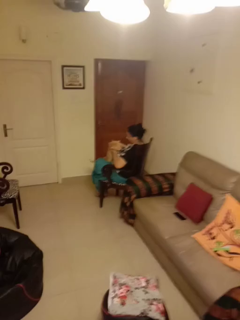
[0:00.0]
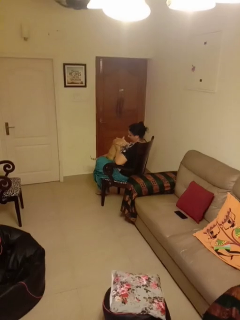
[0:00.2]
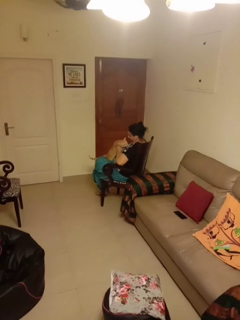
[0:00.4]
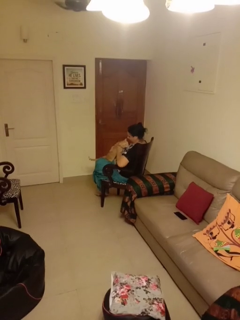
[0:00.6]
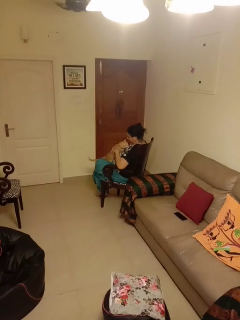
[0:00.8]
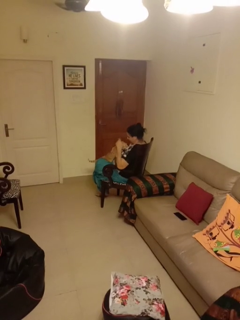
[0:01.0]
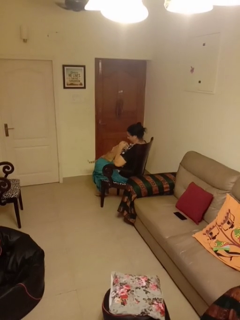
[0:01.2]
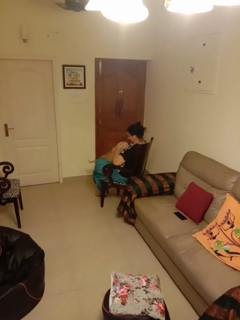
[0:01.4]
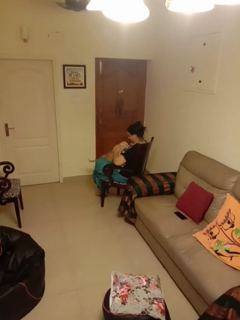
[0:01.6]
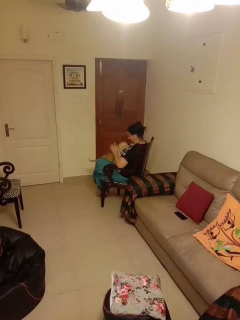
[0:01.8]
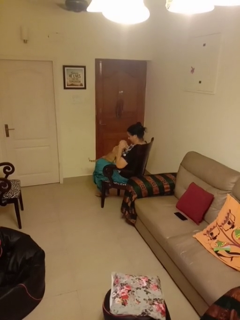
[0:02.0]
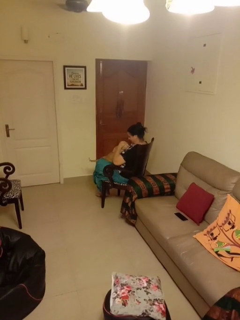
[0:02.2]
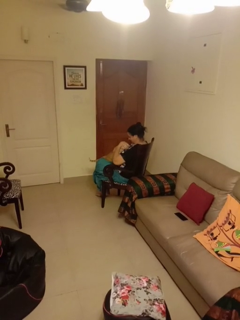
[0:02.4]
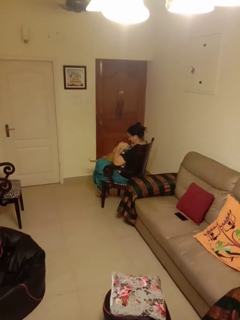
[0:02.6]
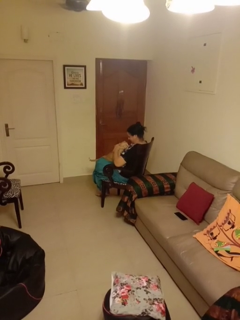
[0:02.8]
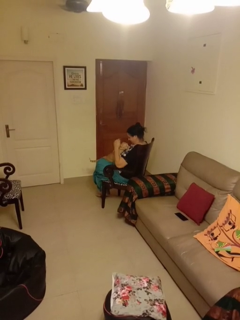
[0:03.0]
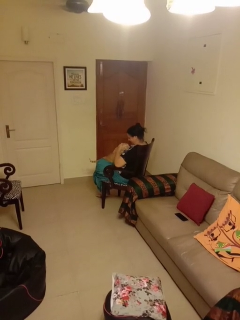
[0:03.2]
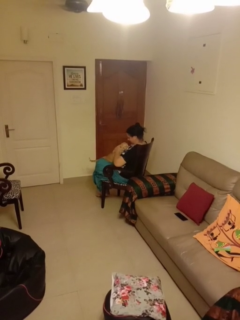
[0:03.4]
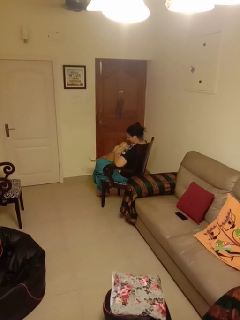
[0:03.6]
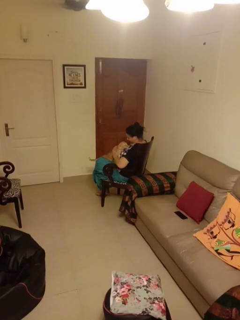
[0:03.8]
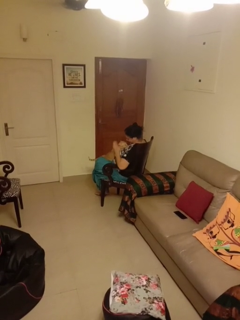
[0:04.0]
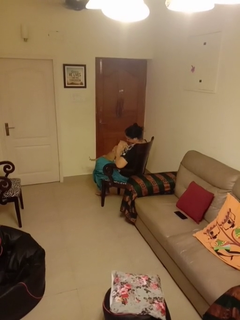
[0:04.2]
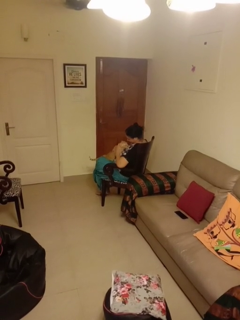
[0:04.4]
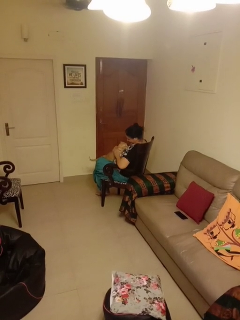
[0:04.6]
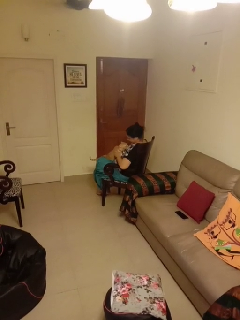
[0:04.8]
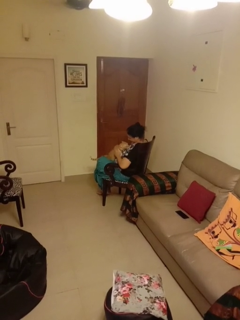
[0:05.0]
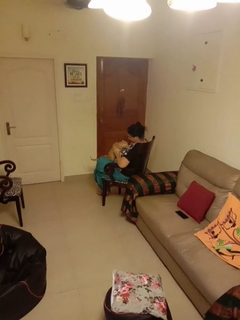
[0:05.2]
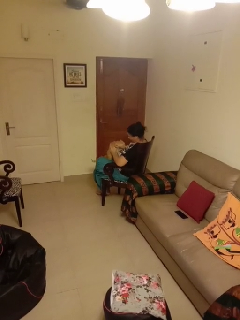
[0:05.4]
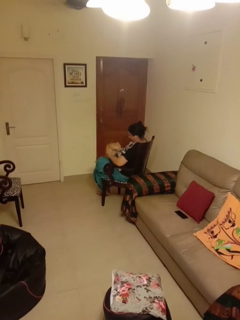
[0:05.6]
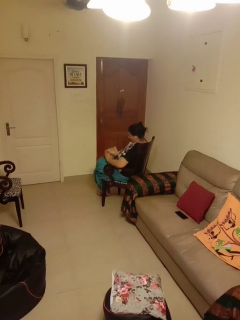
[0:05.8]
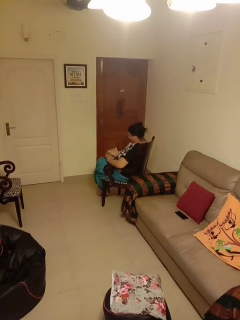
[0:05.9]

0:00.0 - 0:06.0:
person hugs cat

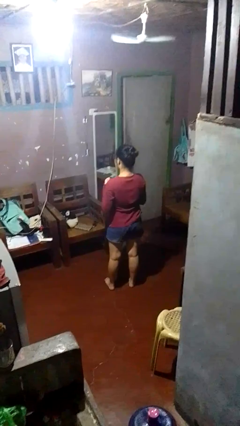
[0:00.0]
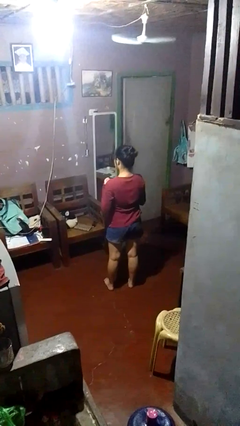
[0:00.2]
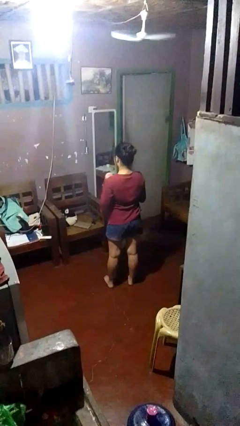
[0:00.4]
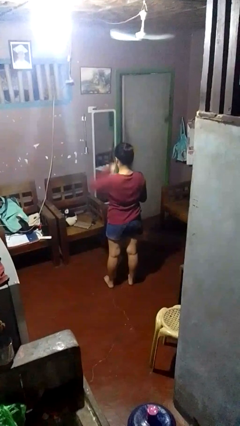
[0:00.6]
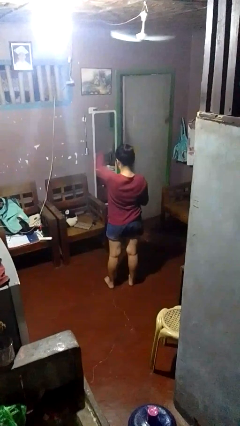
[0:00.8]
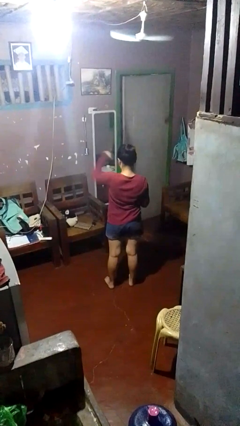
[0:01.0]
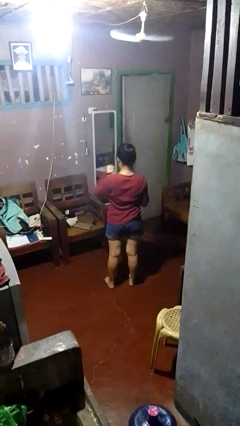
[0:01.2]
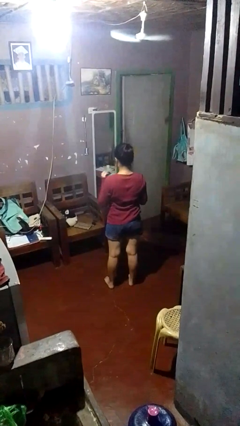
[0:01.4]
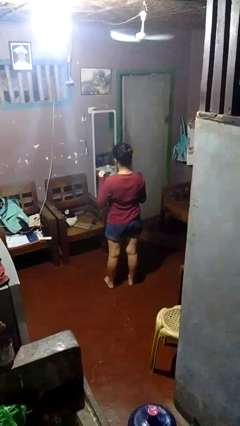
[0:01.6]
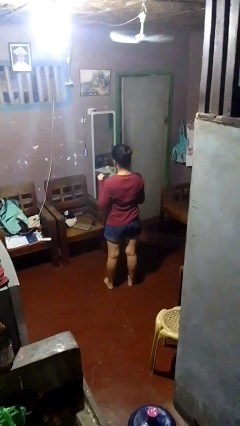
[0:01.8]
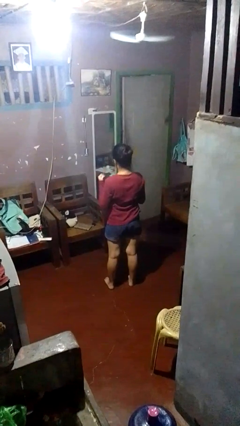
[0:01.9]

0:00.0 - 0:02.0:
person punches

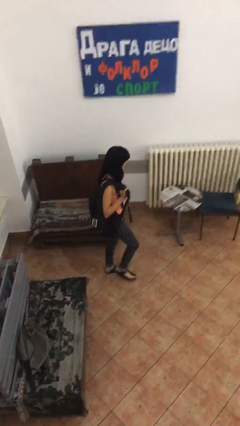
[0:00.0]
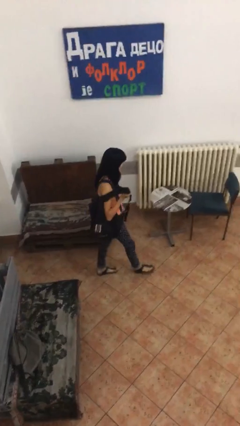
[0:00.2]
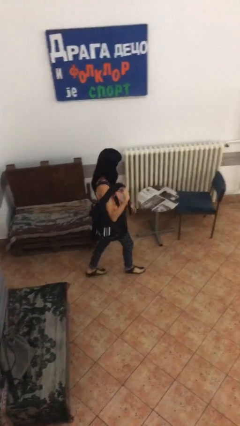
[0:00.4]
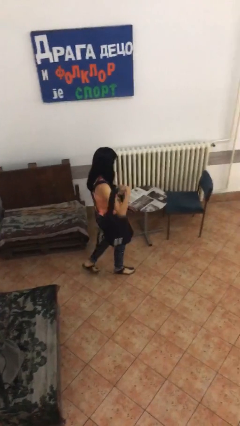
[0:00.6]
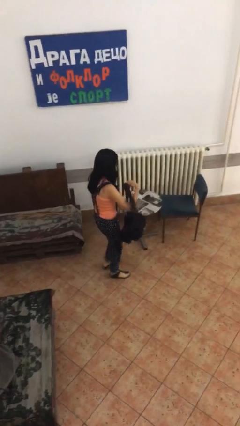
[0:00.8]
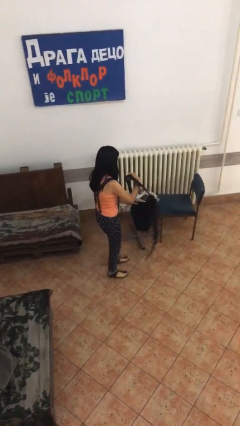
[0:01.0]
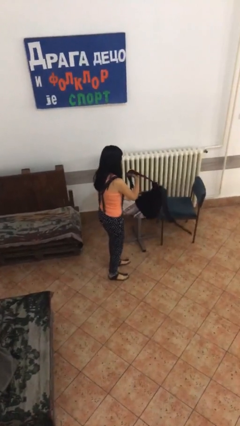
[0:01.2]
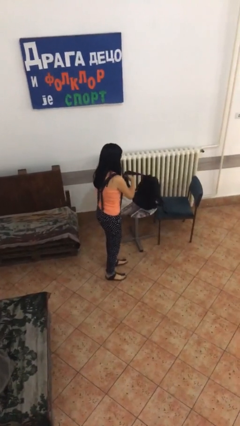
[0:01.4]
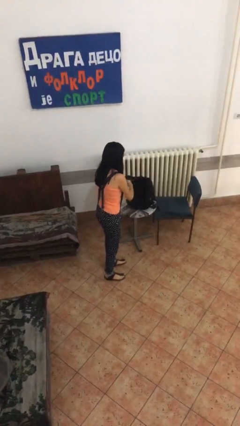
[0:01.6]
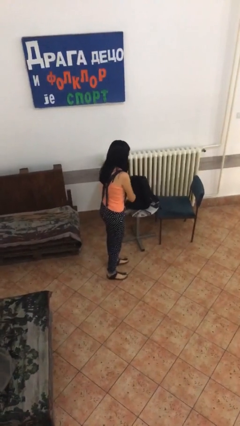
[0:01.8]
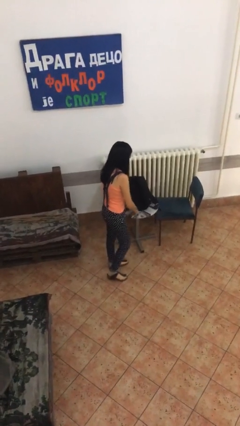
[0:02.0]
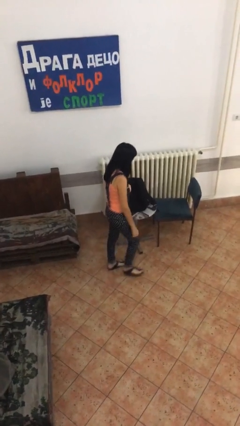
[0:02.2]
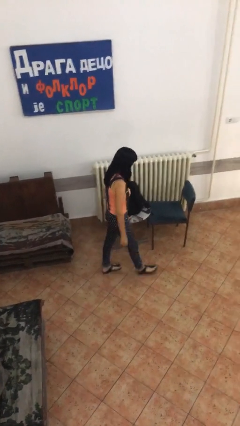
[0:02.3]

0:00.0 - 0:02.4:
person puts down object on table

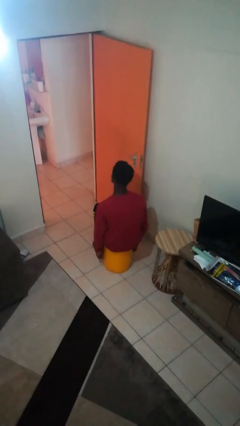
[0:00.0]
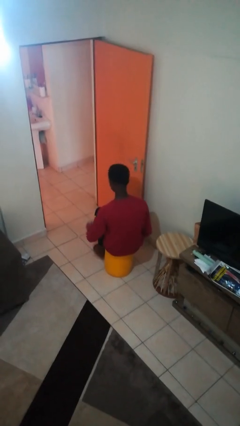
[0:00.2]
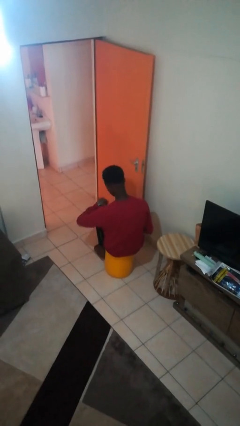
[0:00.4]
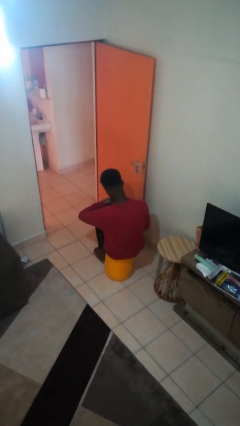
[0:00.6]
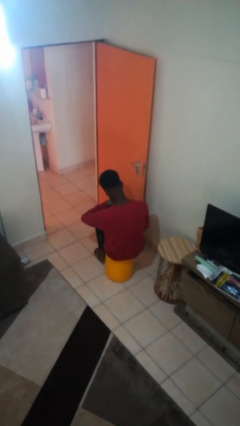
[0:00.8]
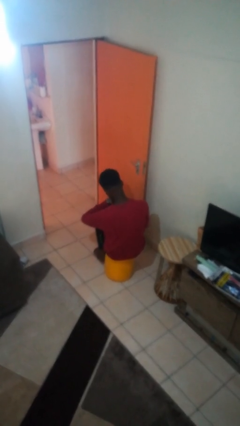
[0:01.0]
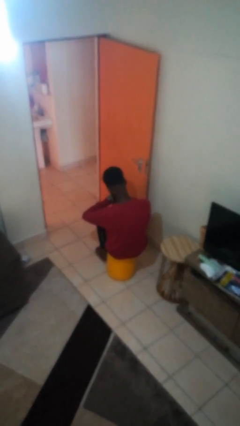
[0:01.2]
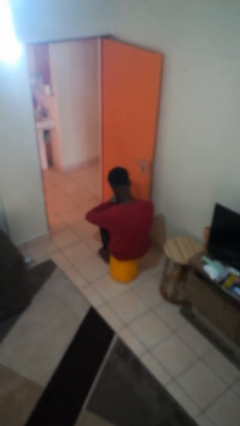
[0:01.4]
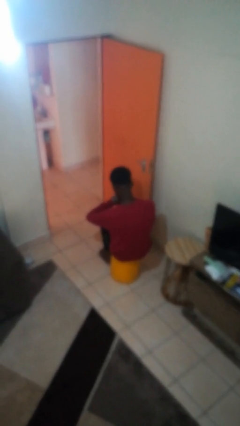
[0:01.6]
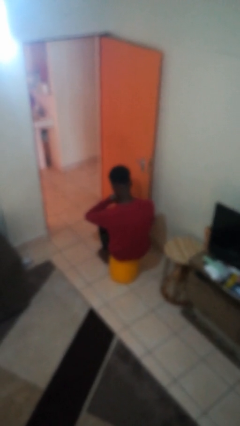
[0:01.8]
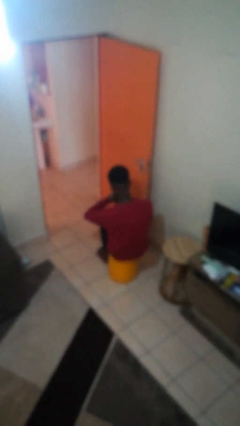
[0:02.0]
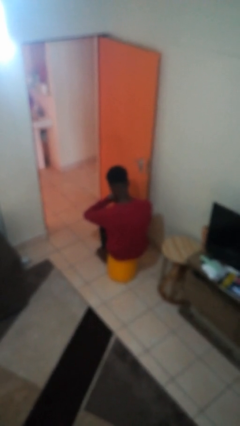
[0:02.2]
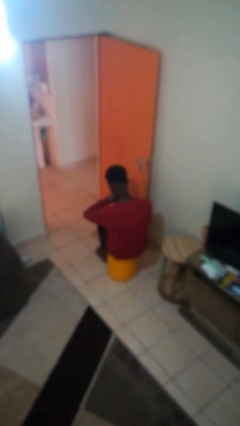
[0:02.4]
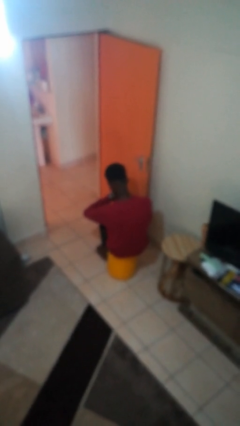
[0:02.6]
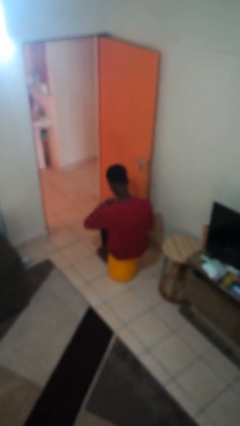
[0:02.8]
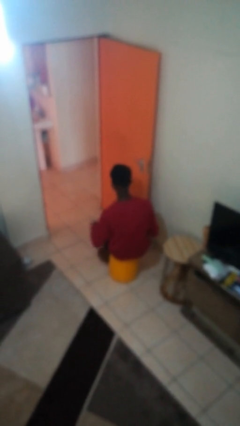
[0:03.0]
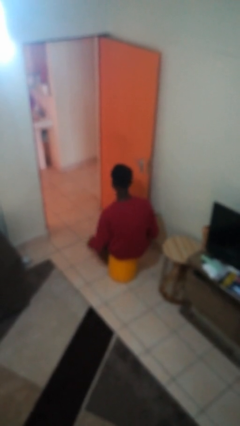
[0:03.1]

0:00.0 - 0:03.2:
person looks at wristwatch

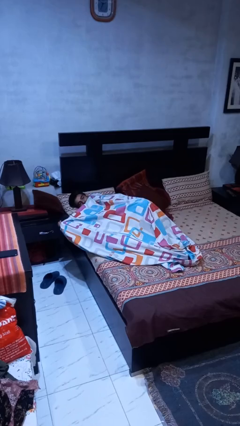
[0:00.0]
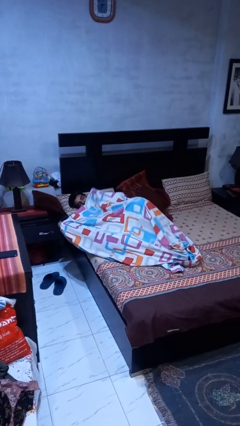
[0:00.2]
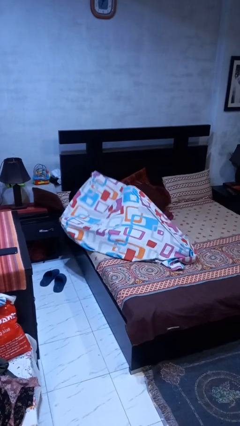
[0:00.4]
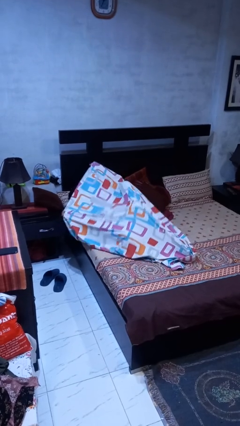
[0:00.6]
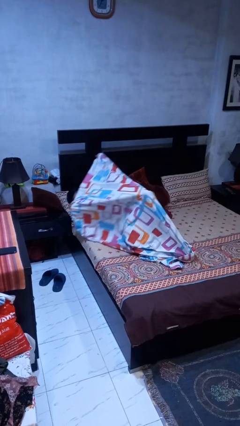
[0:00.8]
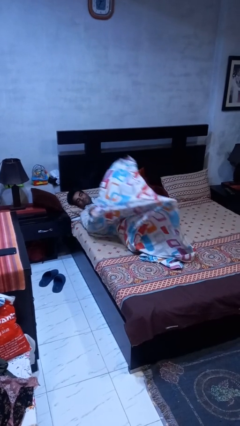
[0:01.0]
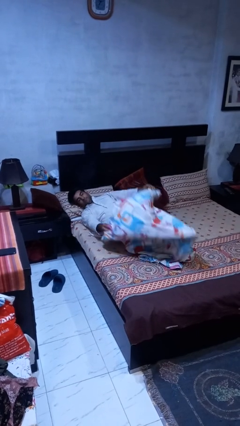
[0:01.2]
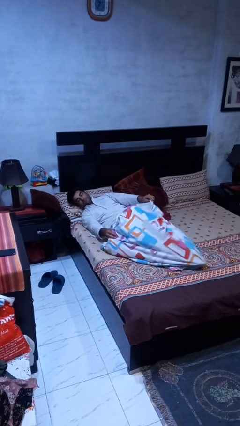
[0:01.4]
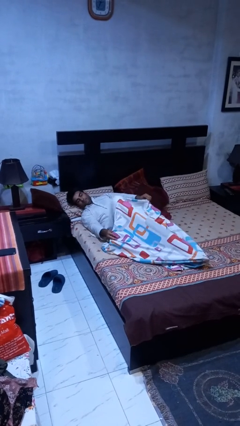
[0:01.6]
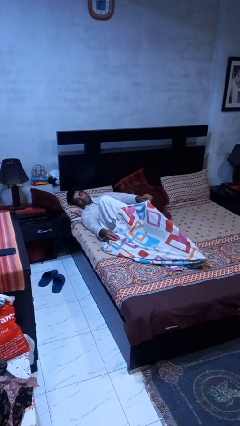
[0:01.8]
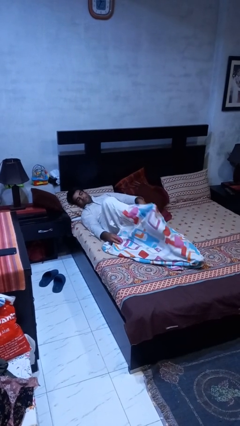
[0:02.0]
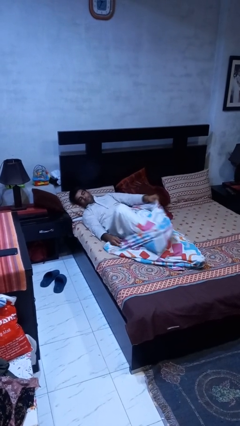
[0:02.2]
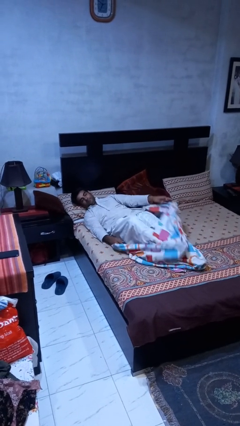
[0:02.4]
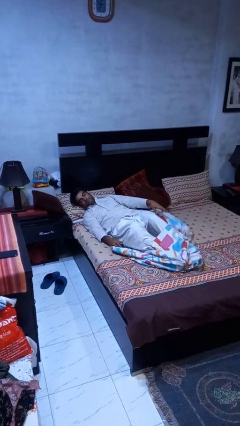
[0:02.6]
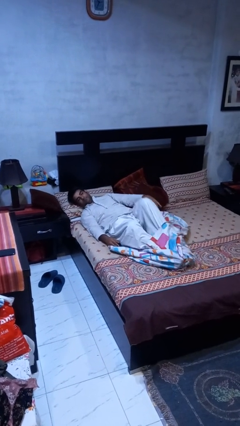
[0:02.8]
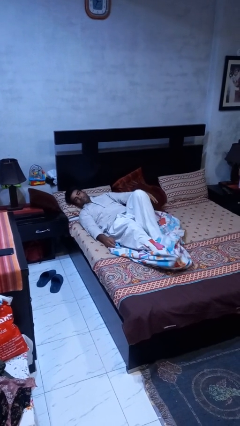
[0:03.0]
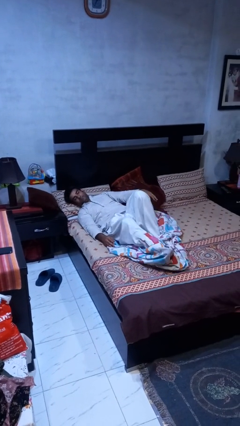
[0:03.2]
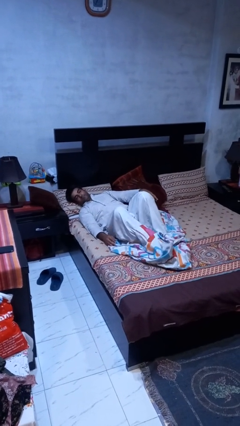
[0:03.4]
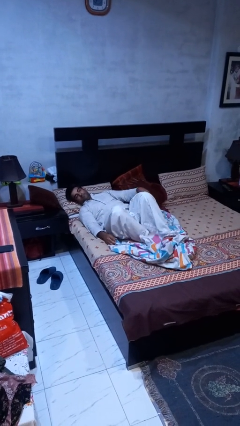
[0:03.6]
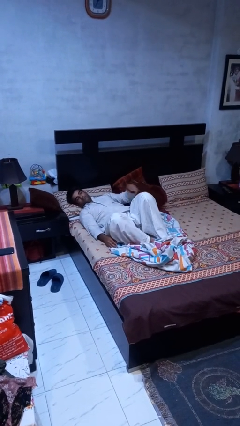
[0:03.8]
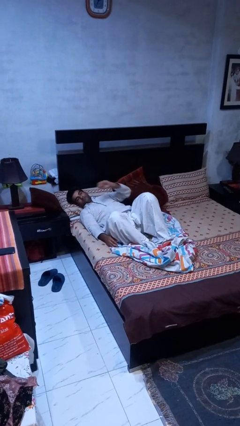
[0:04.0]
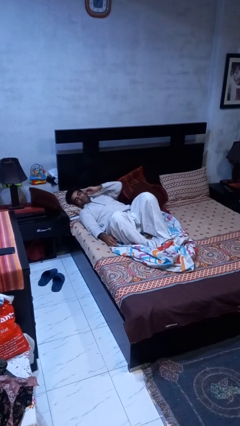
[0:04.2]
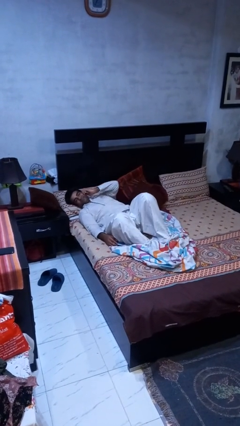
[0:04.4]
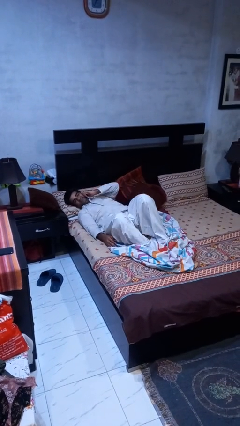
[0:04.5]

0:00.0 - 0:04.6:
person uncovers with bedsheets

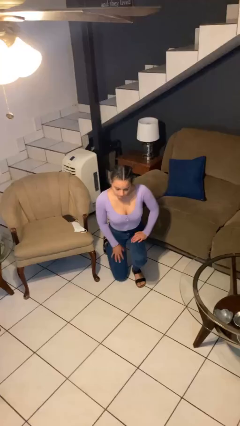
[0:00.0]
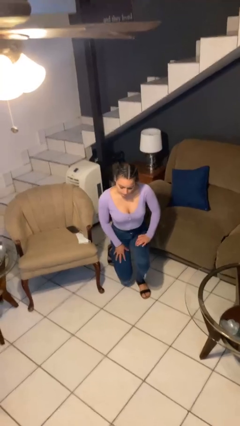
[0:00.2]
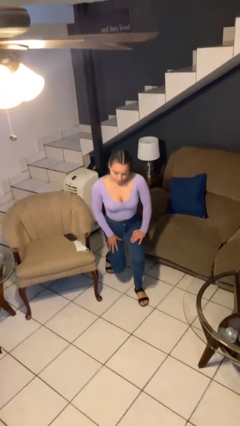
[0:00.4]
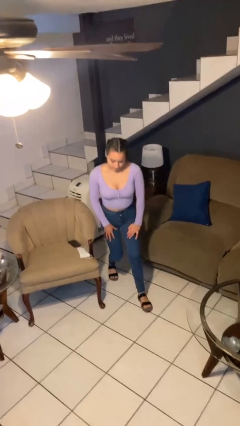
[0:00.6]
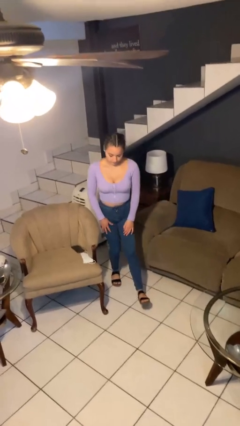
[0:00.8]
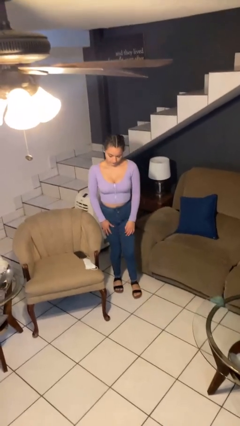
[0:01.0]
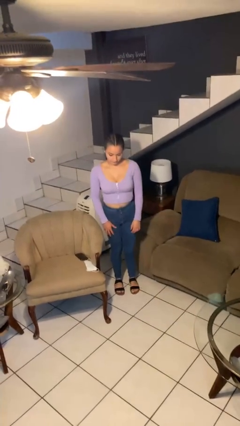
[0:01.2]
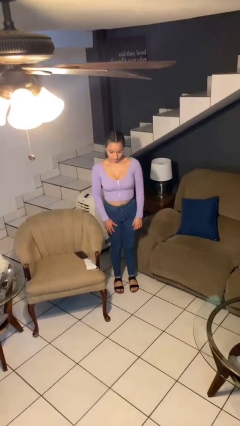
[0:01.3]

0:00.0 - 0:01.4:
person stands up from floor
